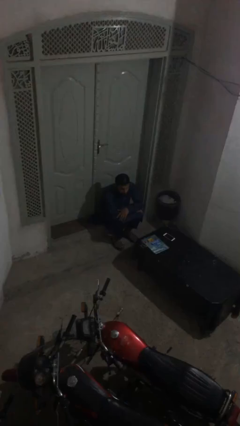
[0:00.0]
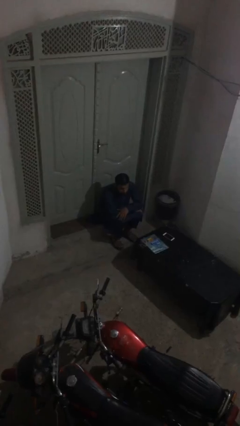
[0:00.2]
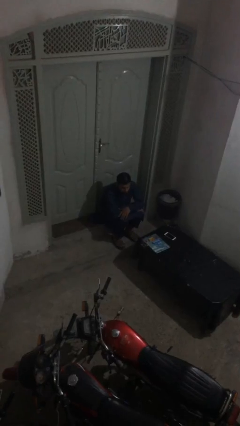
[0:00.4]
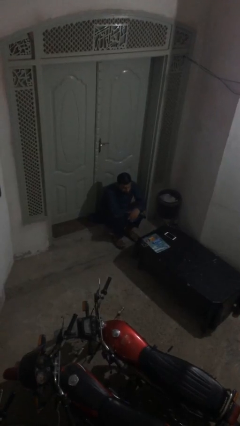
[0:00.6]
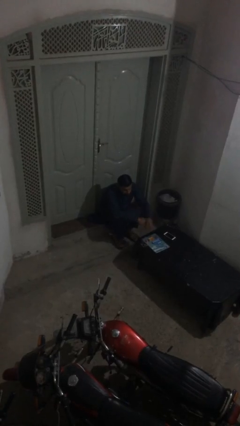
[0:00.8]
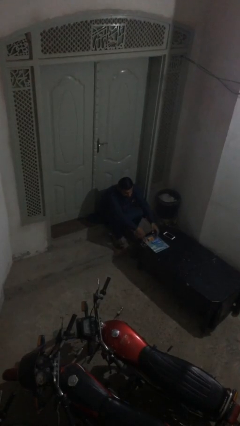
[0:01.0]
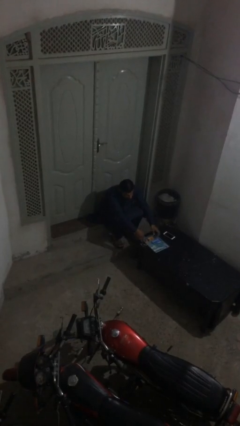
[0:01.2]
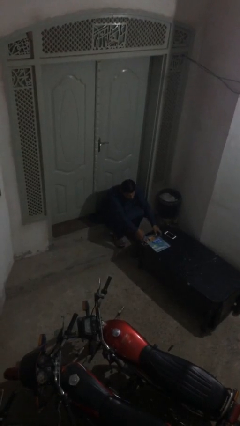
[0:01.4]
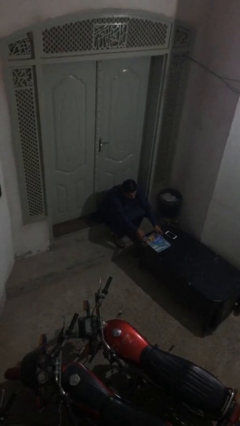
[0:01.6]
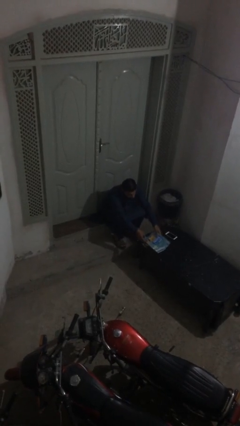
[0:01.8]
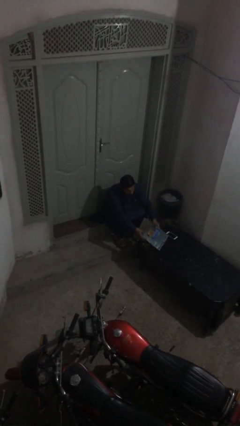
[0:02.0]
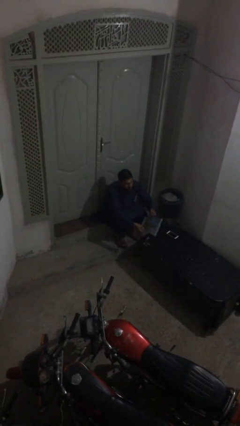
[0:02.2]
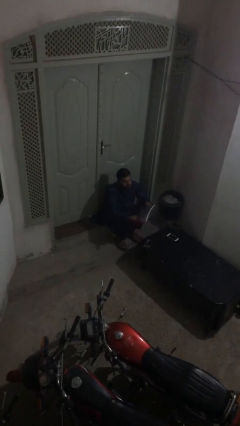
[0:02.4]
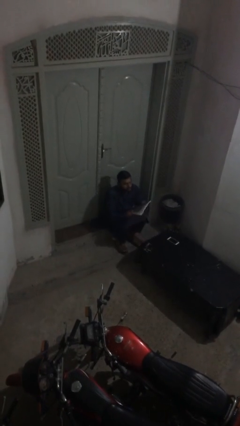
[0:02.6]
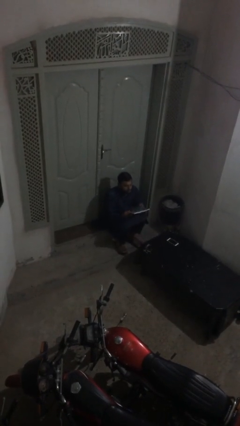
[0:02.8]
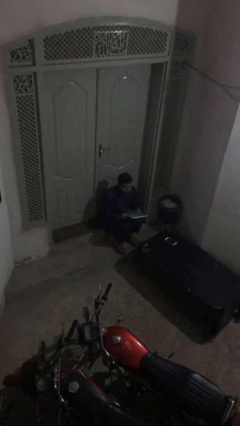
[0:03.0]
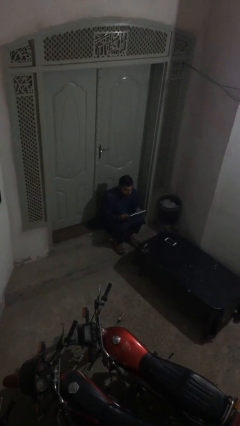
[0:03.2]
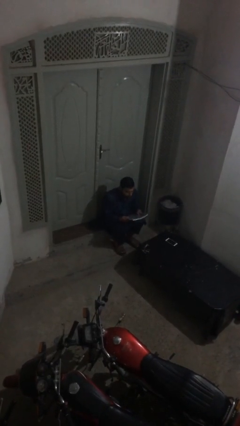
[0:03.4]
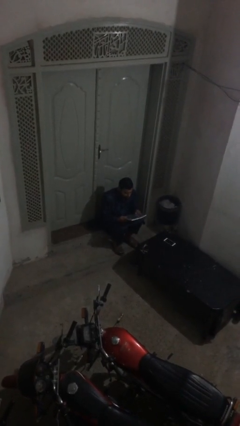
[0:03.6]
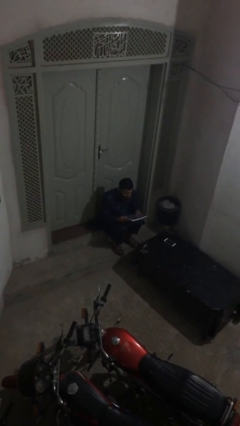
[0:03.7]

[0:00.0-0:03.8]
person picks up object from table

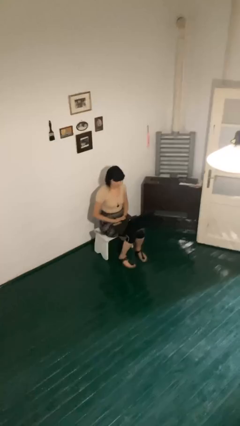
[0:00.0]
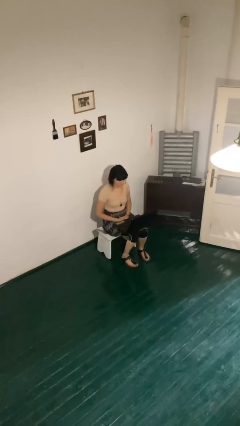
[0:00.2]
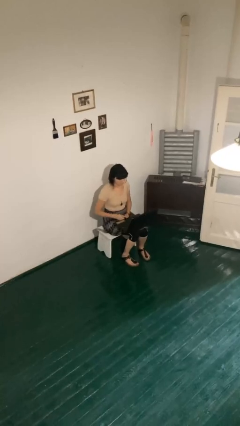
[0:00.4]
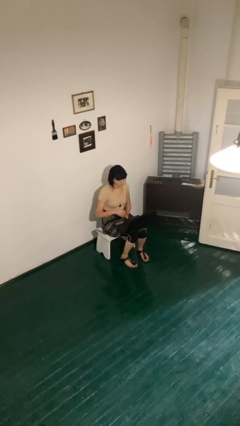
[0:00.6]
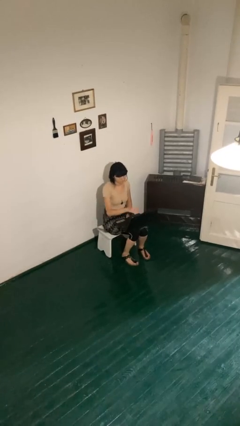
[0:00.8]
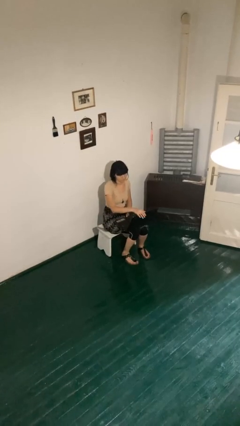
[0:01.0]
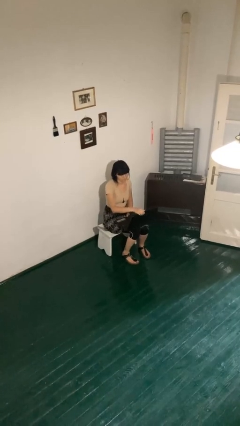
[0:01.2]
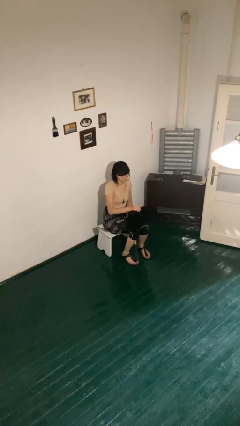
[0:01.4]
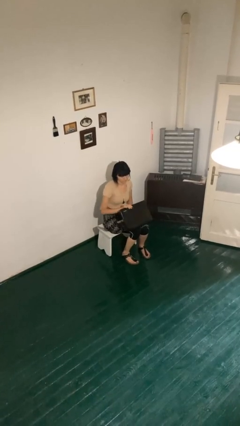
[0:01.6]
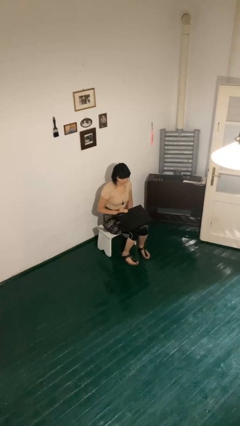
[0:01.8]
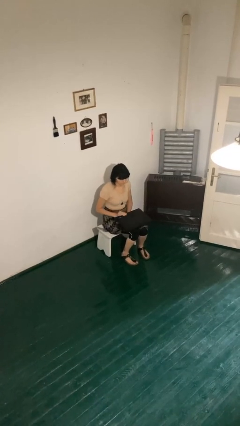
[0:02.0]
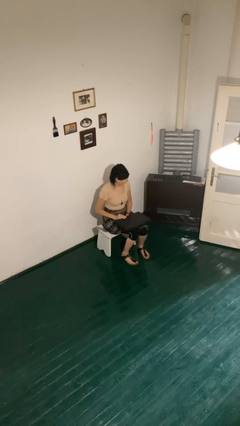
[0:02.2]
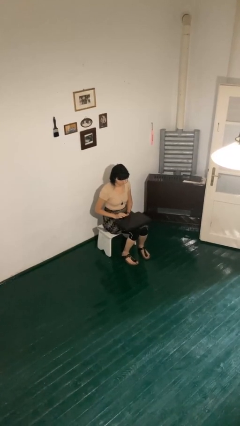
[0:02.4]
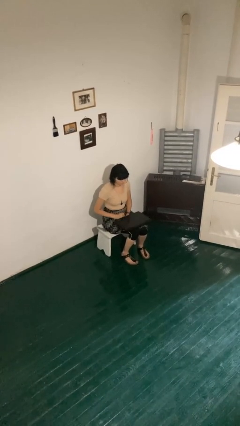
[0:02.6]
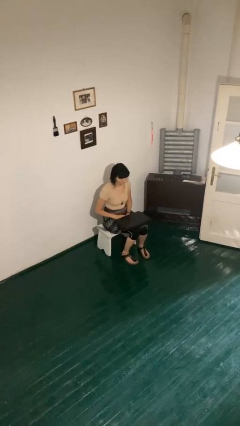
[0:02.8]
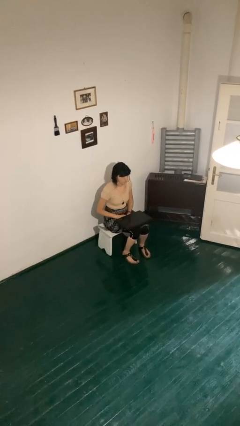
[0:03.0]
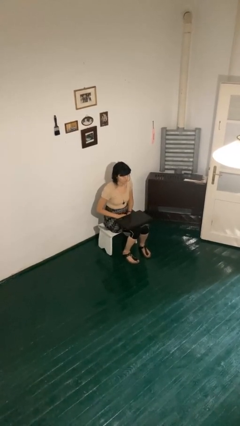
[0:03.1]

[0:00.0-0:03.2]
person closes laptop

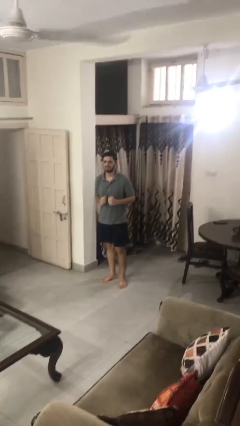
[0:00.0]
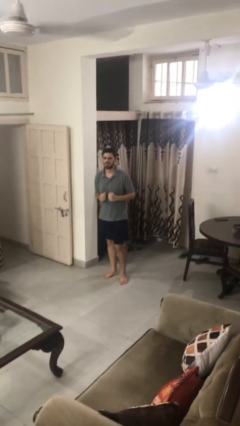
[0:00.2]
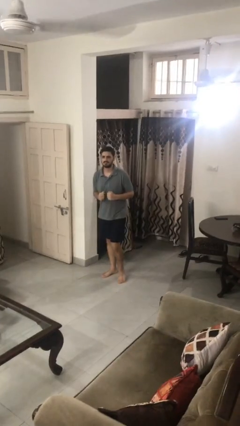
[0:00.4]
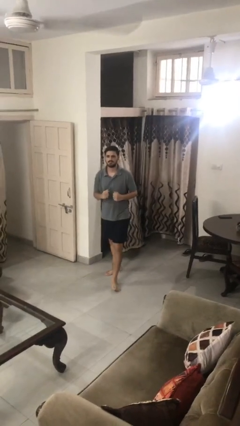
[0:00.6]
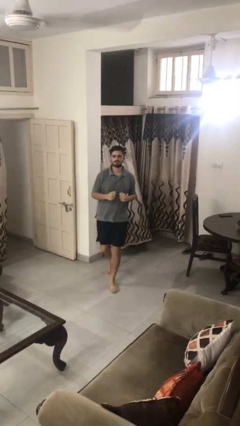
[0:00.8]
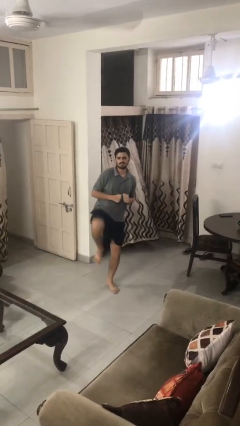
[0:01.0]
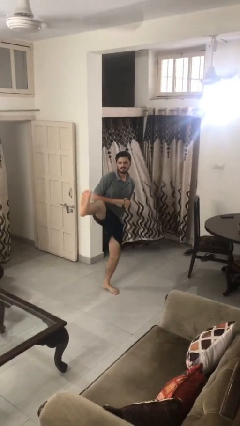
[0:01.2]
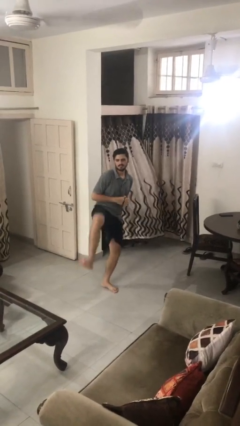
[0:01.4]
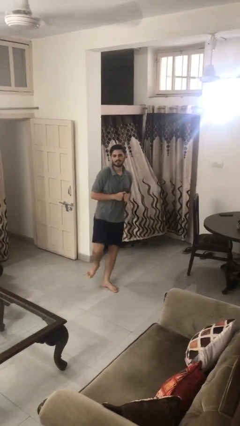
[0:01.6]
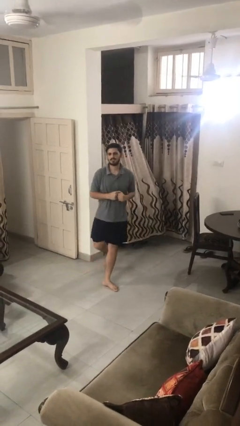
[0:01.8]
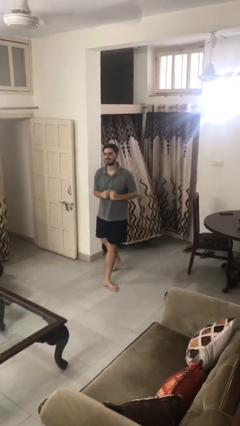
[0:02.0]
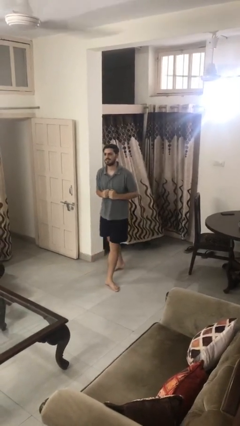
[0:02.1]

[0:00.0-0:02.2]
person karate kicks

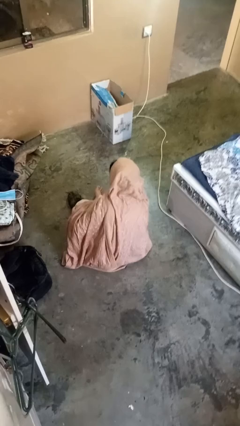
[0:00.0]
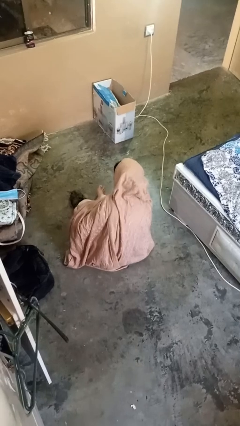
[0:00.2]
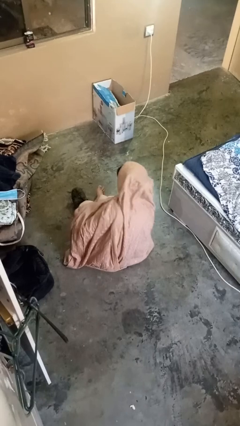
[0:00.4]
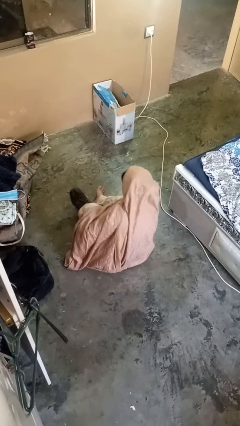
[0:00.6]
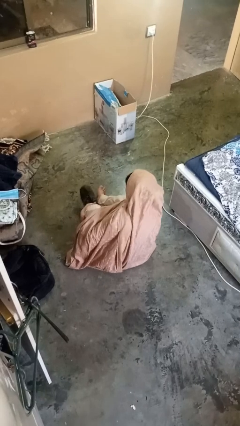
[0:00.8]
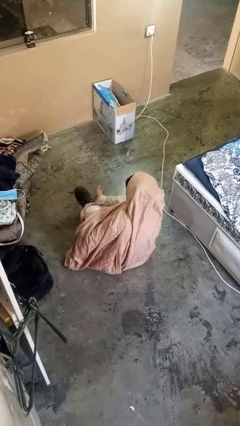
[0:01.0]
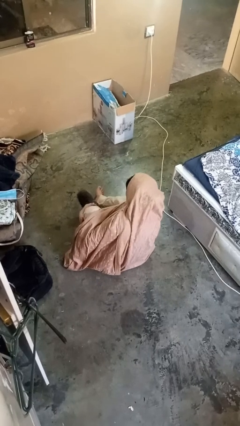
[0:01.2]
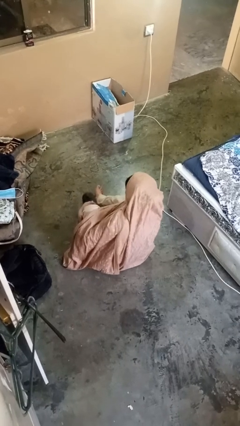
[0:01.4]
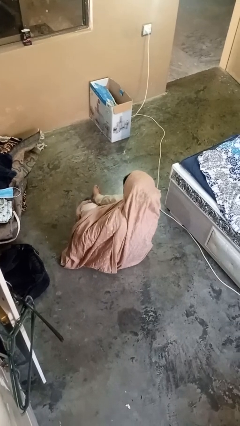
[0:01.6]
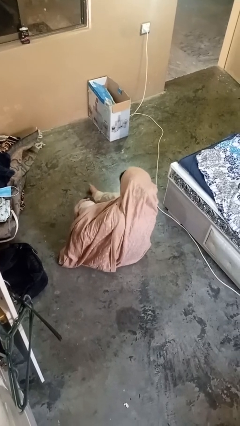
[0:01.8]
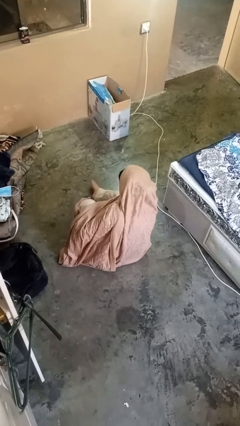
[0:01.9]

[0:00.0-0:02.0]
person puts on shoes

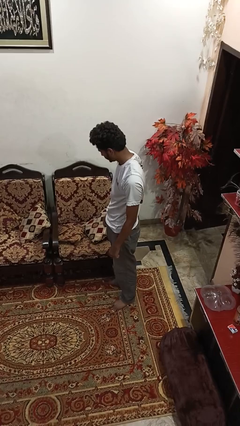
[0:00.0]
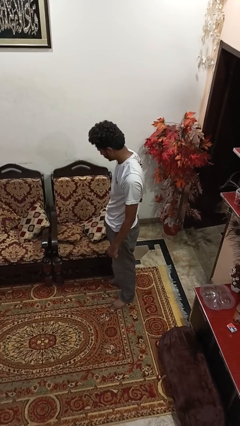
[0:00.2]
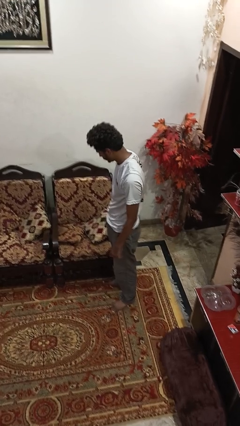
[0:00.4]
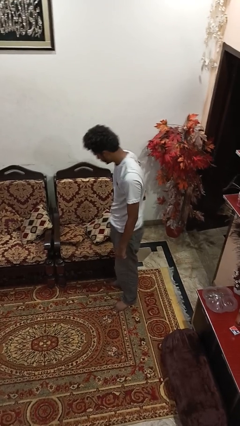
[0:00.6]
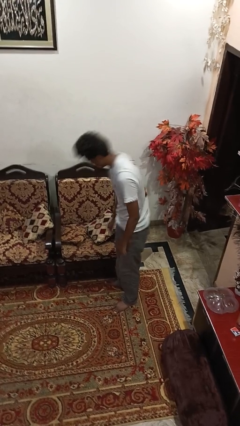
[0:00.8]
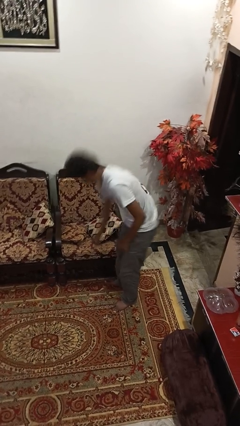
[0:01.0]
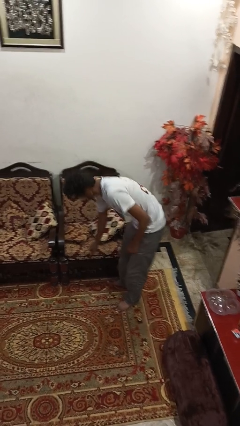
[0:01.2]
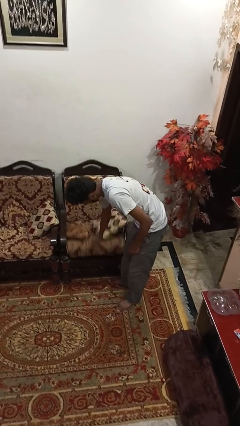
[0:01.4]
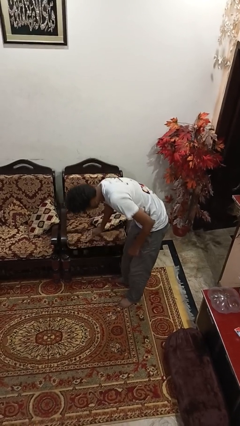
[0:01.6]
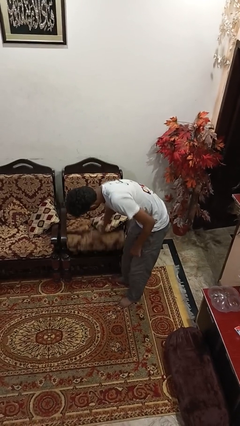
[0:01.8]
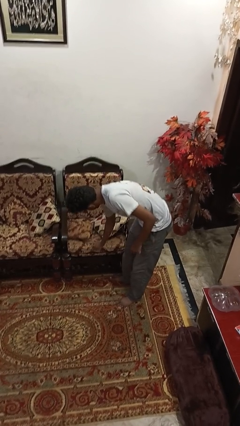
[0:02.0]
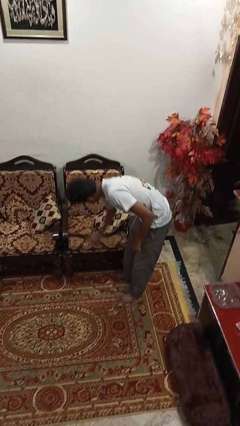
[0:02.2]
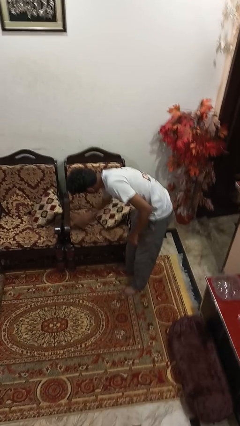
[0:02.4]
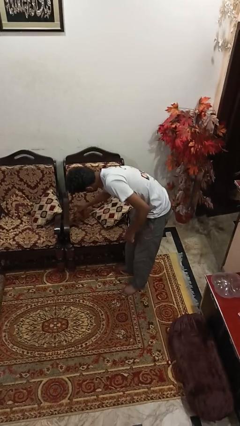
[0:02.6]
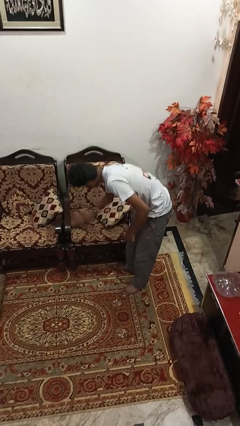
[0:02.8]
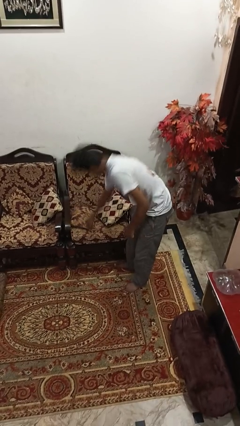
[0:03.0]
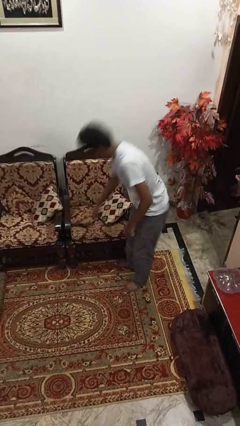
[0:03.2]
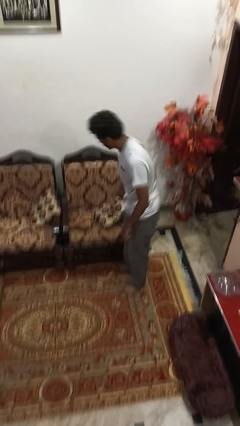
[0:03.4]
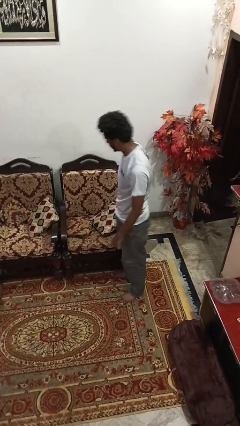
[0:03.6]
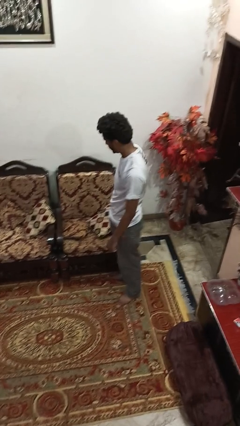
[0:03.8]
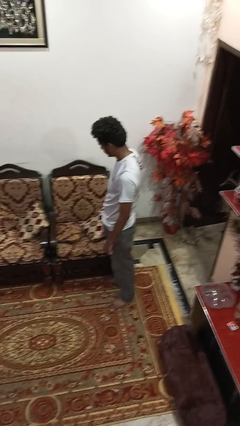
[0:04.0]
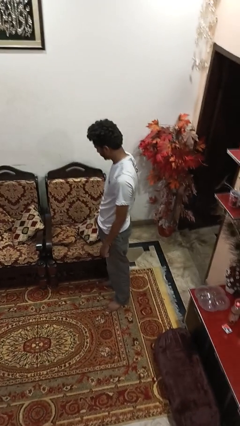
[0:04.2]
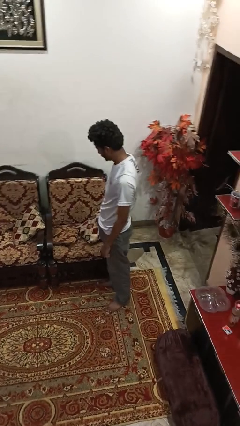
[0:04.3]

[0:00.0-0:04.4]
person searches in couch

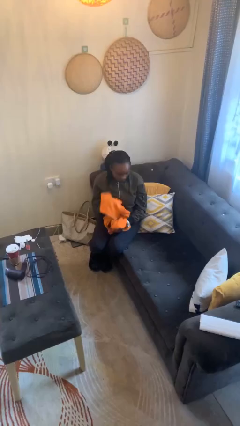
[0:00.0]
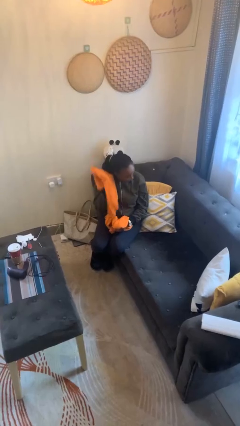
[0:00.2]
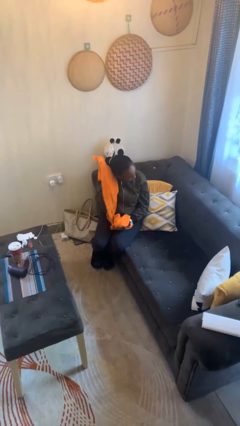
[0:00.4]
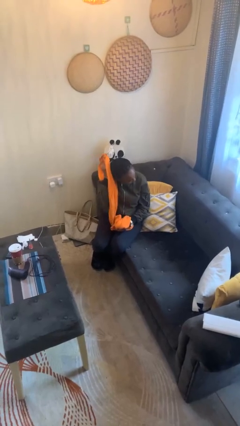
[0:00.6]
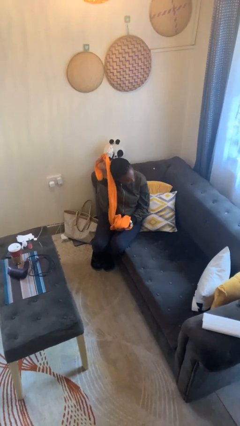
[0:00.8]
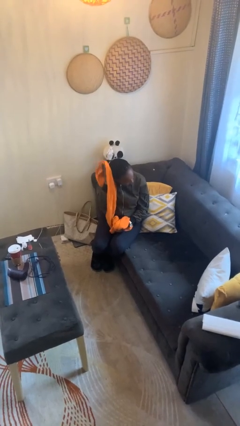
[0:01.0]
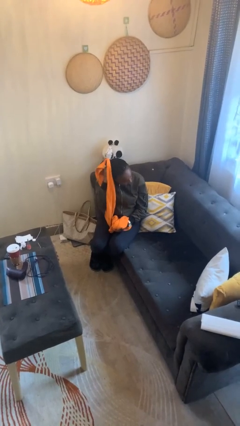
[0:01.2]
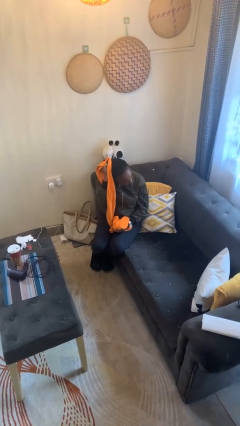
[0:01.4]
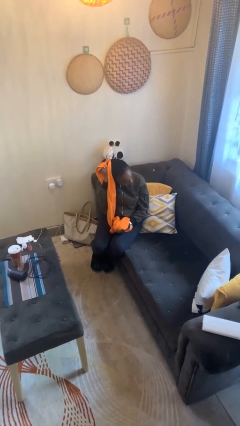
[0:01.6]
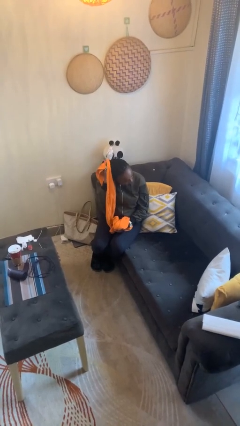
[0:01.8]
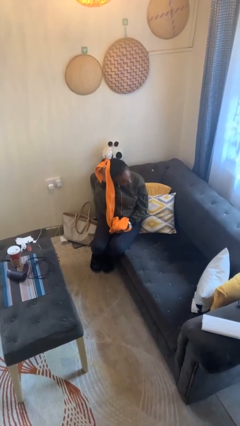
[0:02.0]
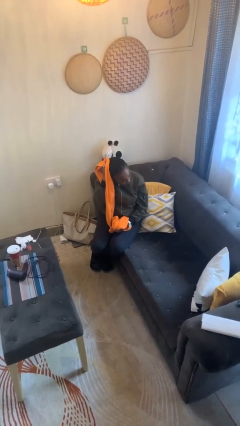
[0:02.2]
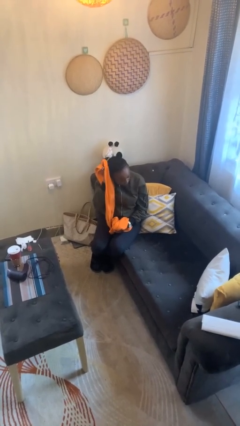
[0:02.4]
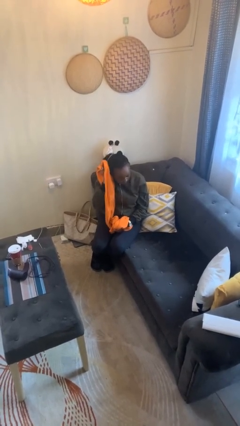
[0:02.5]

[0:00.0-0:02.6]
person dries hair with towel
